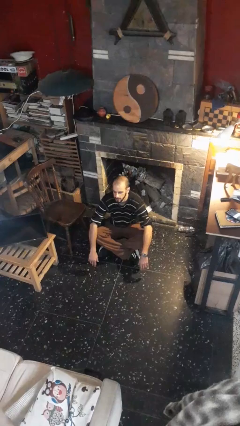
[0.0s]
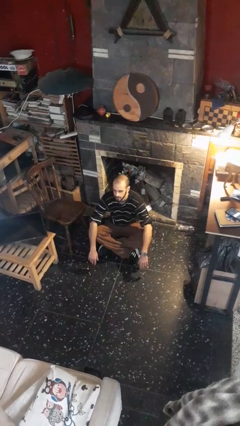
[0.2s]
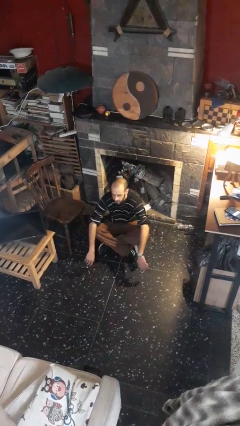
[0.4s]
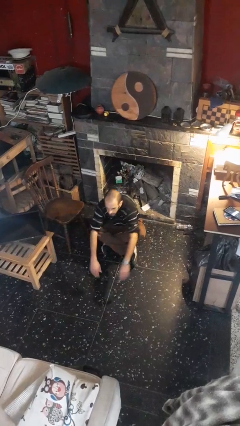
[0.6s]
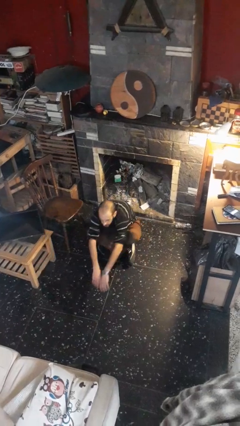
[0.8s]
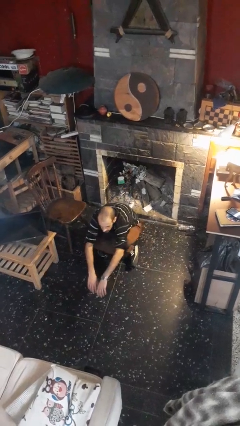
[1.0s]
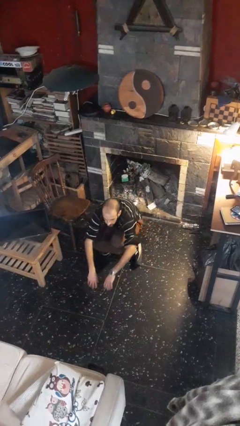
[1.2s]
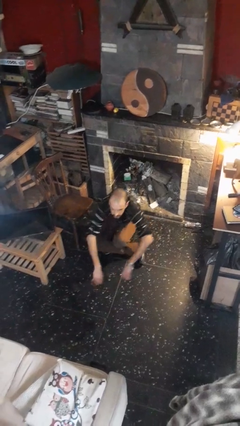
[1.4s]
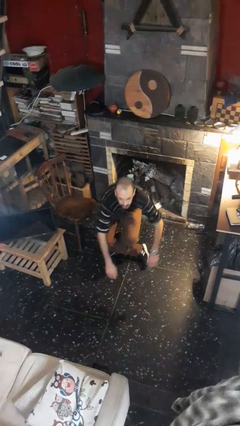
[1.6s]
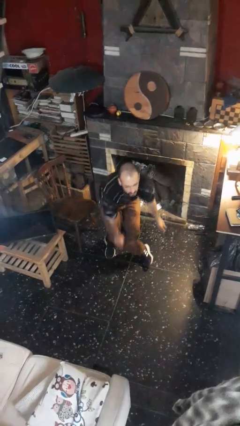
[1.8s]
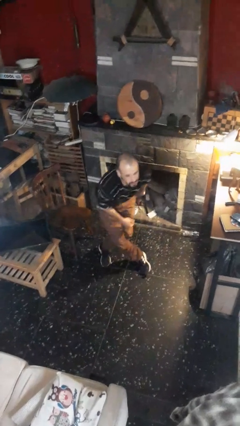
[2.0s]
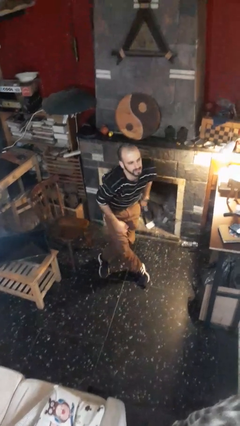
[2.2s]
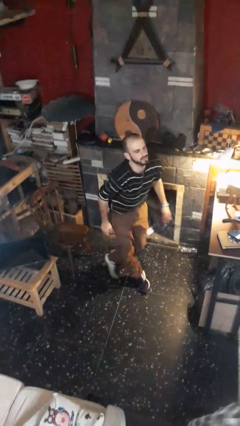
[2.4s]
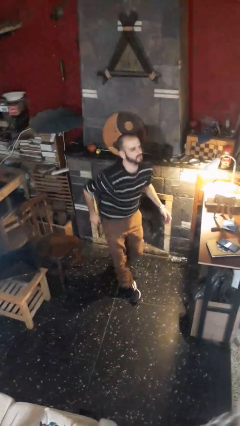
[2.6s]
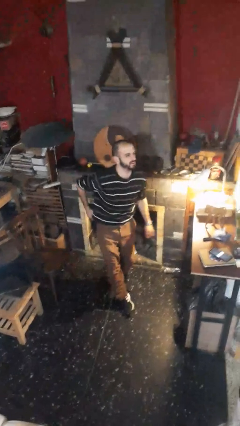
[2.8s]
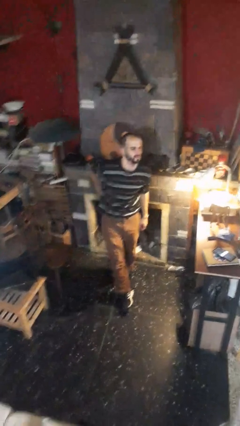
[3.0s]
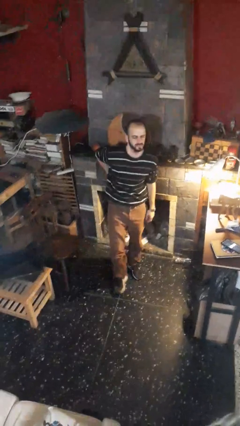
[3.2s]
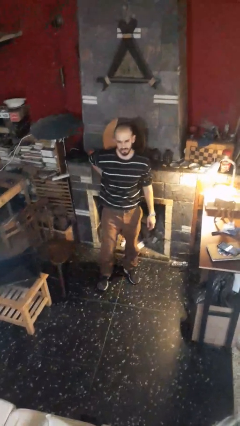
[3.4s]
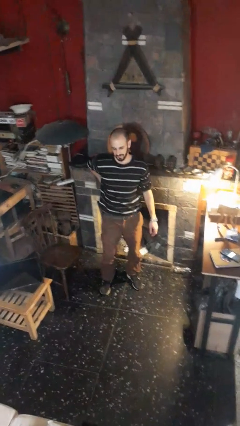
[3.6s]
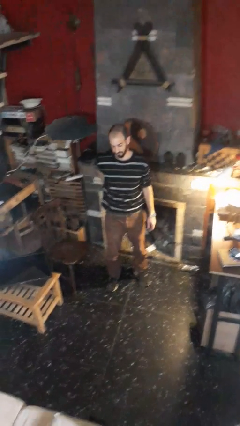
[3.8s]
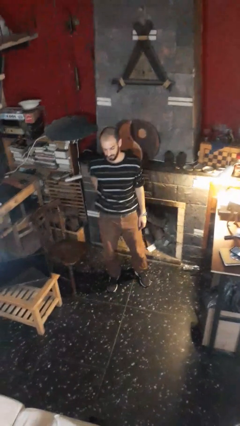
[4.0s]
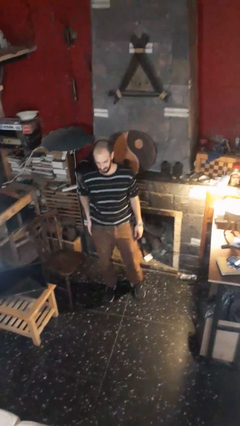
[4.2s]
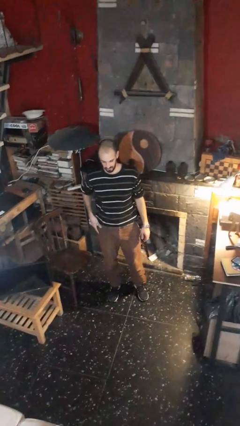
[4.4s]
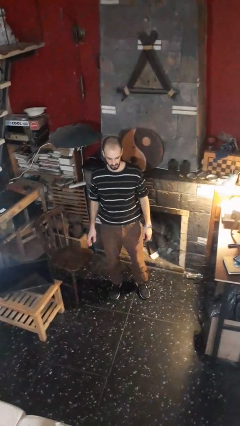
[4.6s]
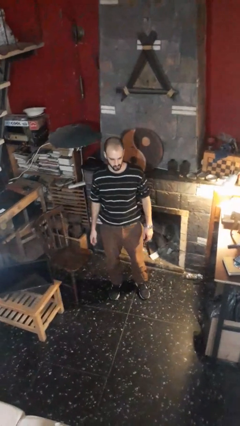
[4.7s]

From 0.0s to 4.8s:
person stands up from floor

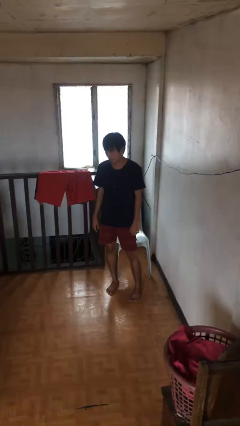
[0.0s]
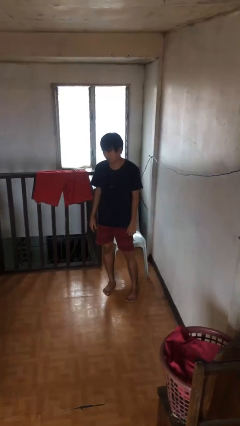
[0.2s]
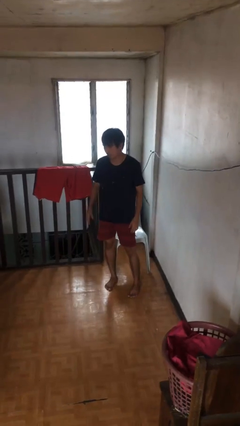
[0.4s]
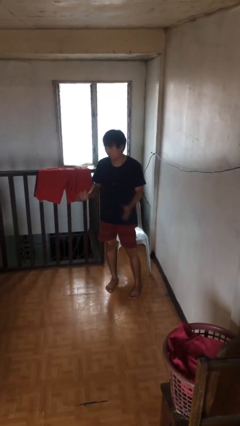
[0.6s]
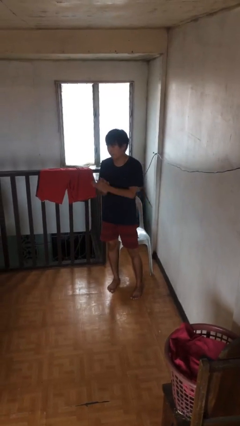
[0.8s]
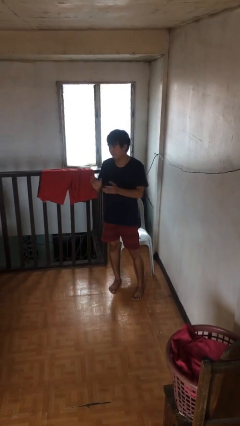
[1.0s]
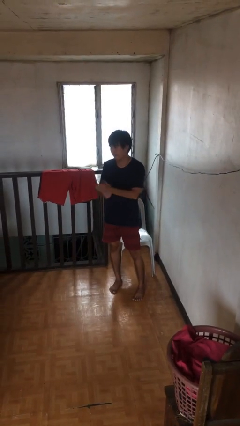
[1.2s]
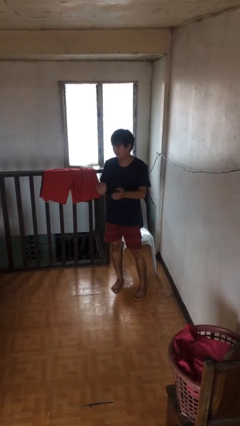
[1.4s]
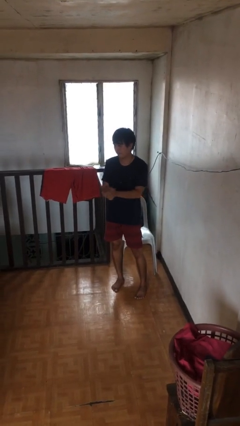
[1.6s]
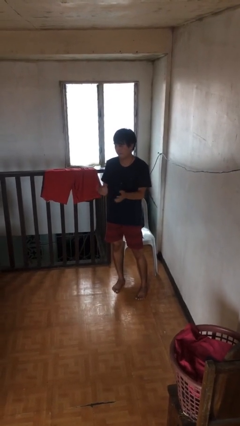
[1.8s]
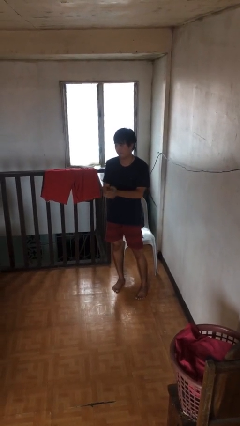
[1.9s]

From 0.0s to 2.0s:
person claps hands

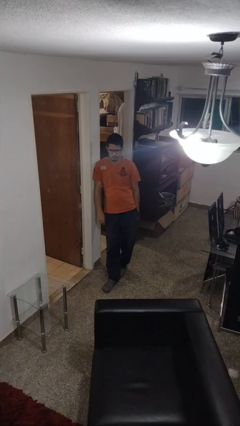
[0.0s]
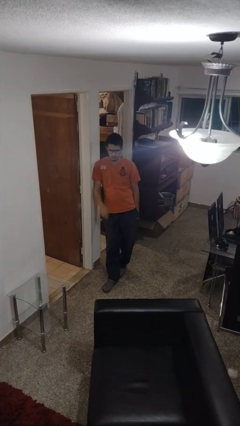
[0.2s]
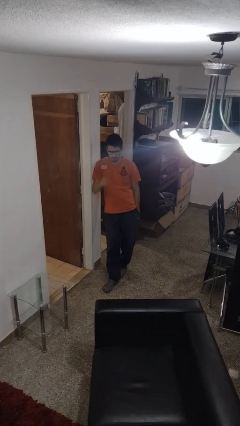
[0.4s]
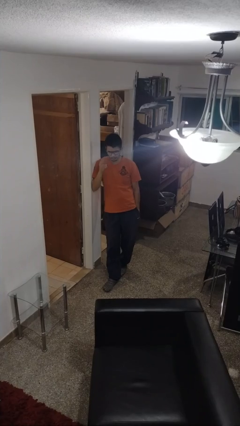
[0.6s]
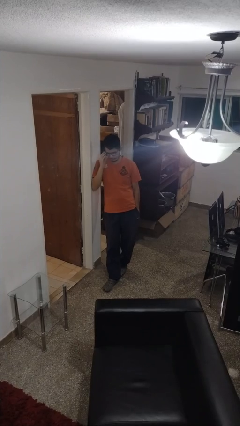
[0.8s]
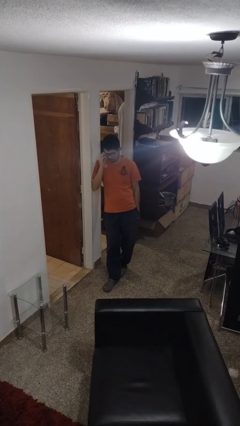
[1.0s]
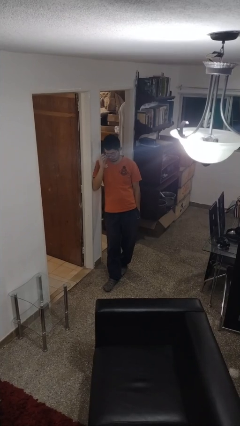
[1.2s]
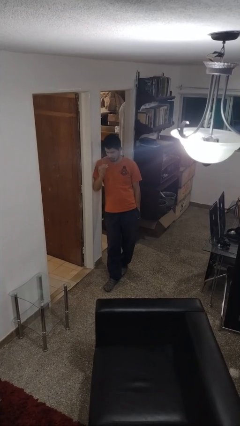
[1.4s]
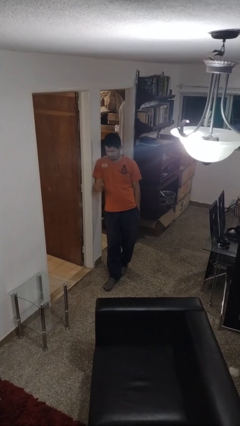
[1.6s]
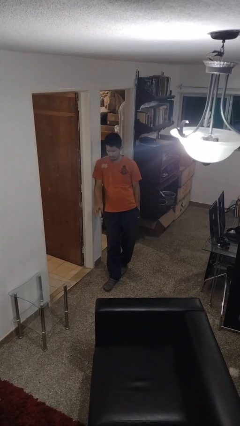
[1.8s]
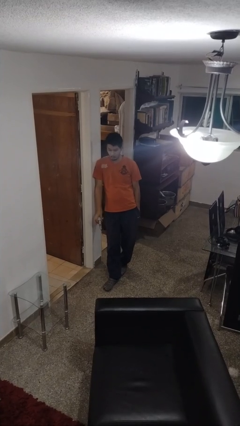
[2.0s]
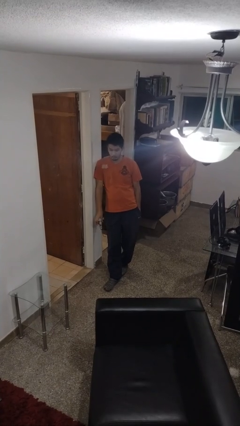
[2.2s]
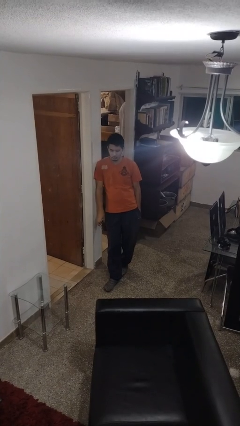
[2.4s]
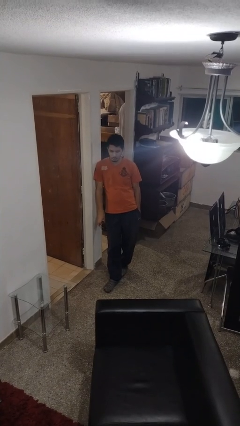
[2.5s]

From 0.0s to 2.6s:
person takes off glasses

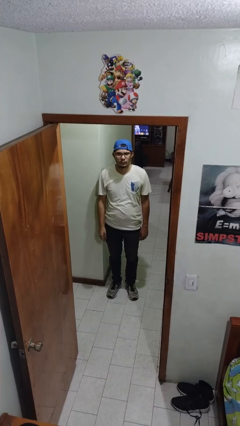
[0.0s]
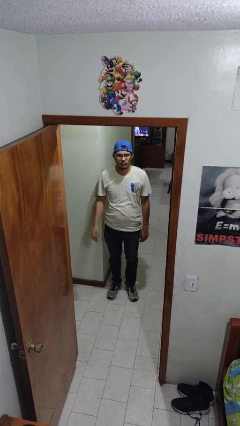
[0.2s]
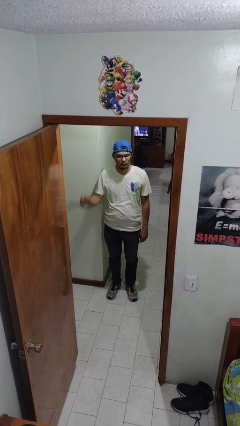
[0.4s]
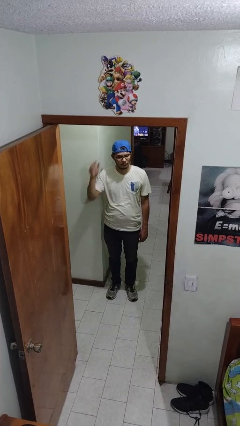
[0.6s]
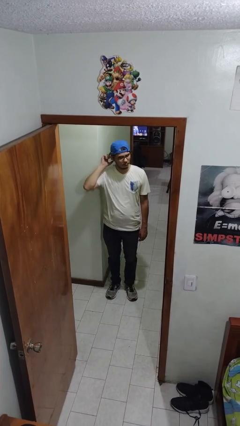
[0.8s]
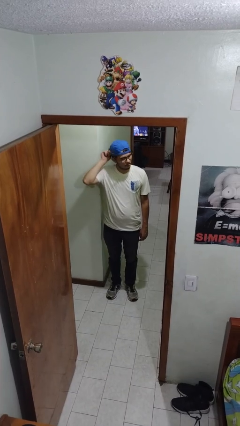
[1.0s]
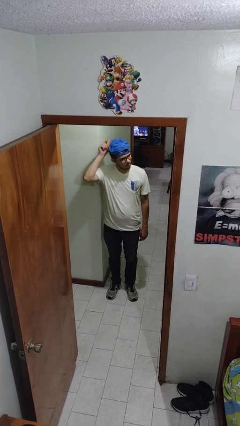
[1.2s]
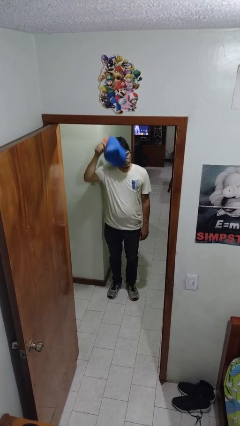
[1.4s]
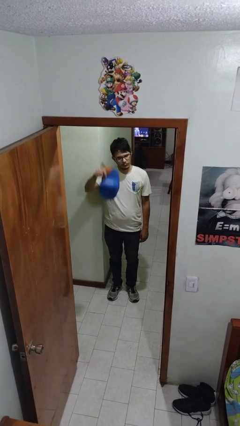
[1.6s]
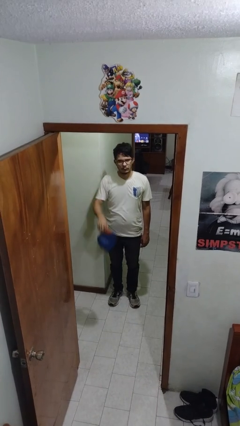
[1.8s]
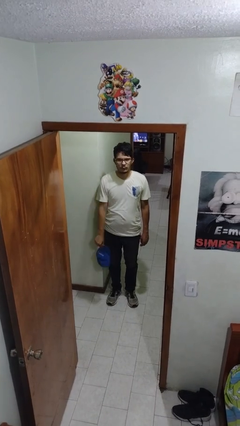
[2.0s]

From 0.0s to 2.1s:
person takes off hat

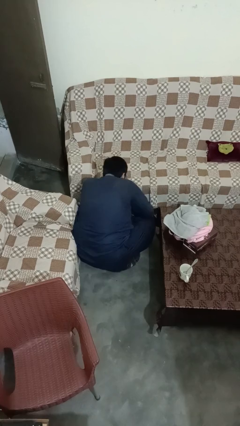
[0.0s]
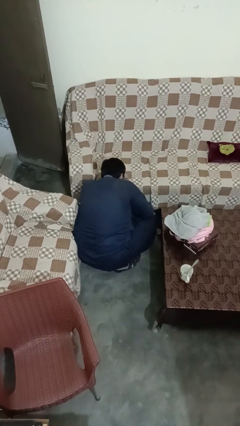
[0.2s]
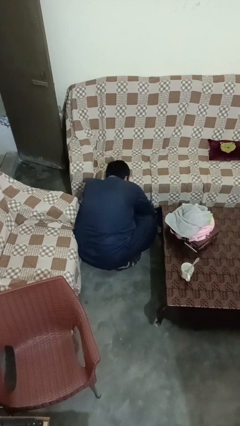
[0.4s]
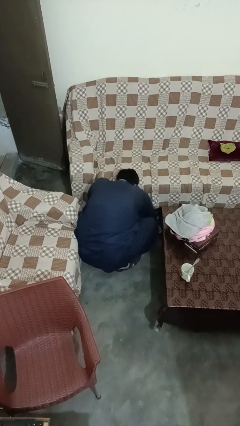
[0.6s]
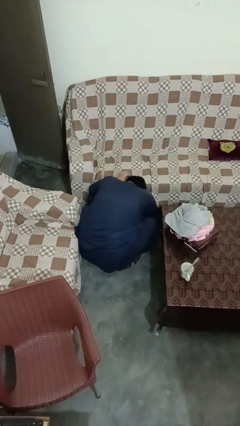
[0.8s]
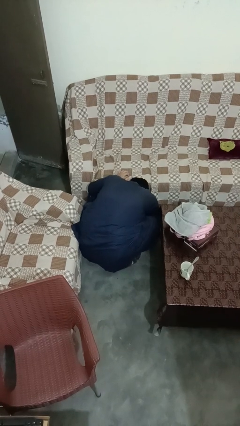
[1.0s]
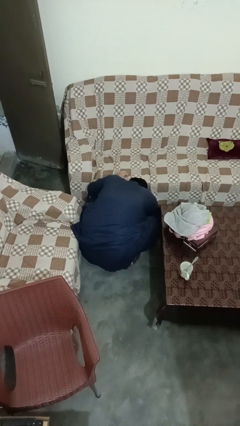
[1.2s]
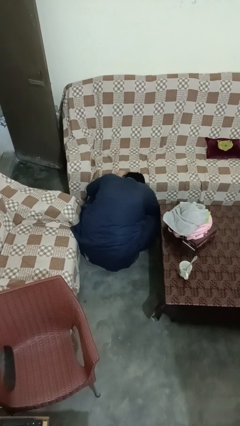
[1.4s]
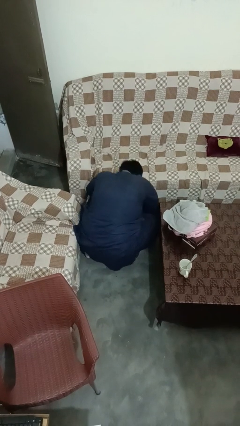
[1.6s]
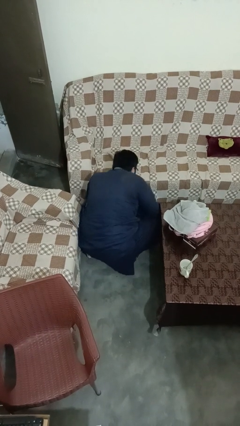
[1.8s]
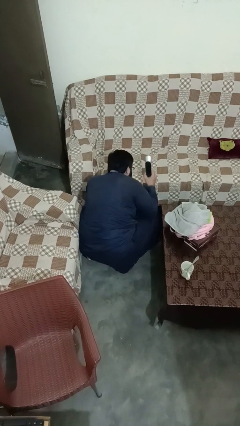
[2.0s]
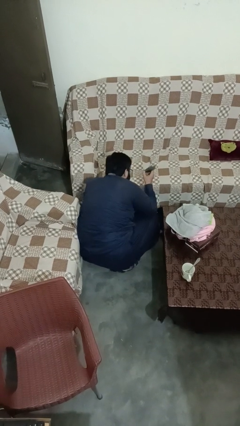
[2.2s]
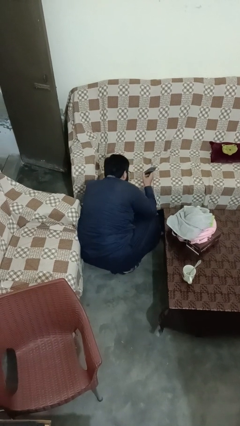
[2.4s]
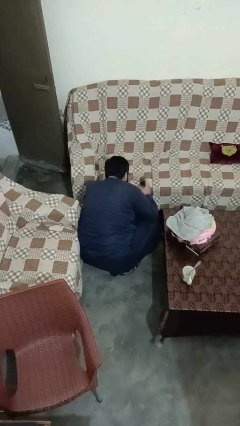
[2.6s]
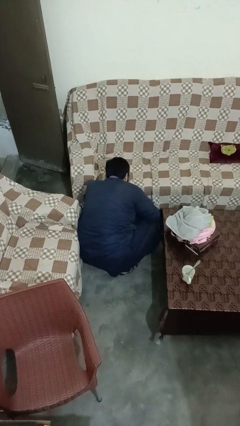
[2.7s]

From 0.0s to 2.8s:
person searches under couch

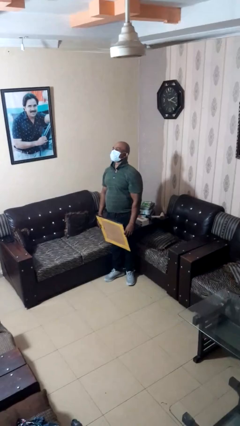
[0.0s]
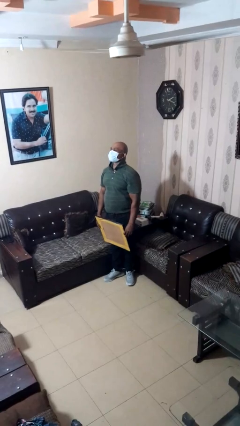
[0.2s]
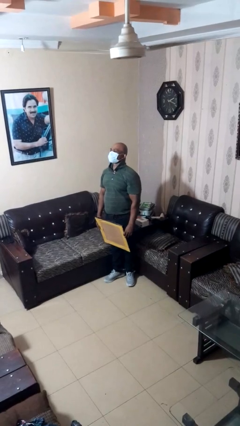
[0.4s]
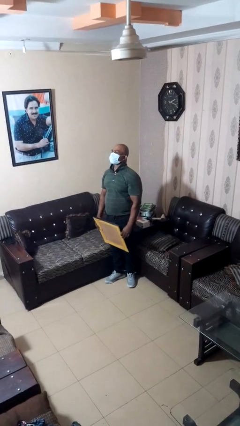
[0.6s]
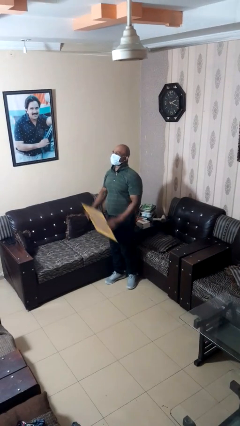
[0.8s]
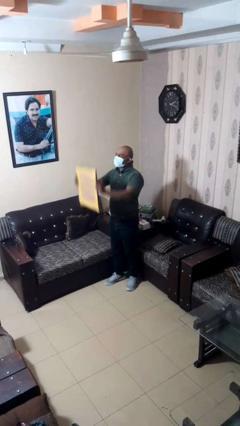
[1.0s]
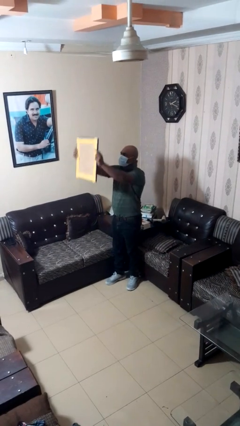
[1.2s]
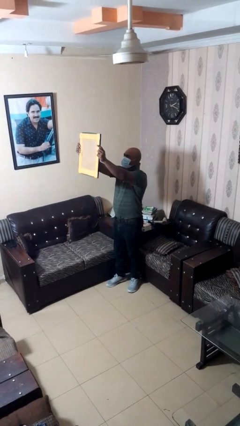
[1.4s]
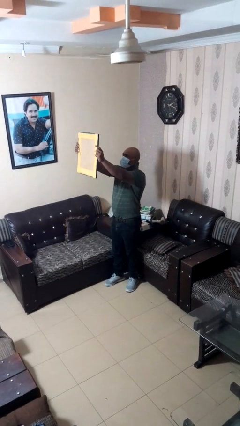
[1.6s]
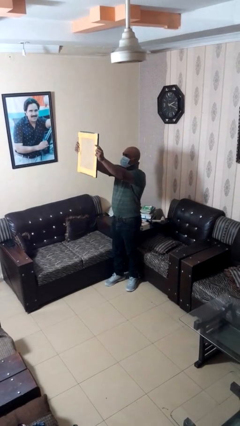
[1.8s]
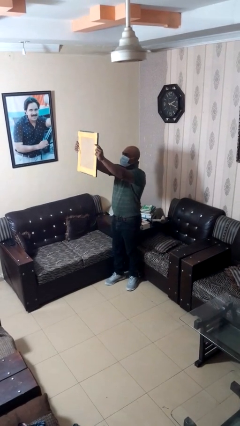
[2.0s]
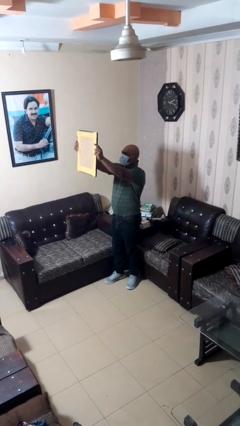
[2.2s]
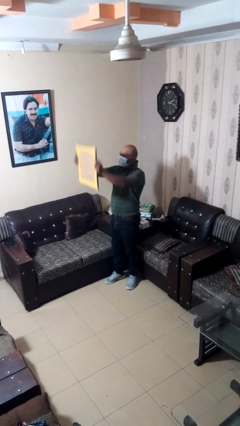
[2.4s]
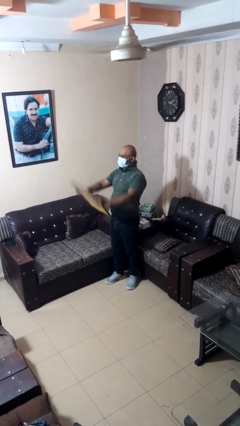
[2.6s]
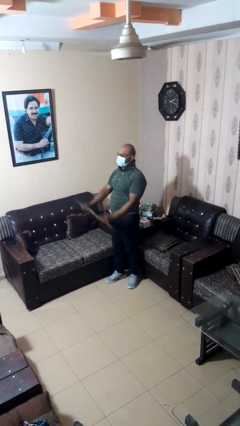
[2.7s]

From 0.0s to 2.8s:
person holds object above head

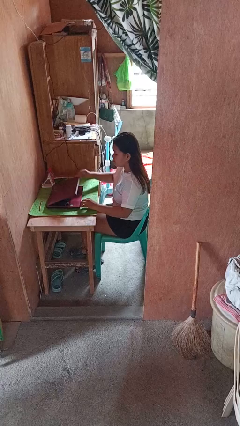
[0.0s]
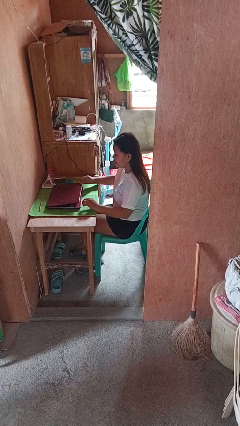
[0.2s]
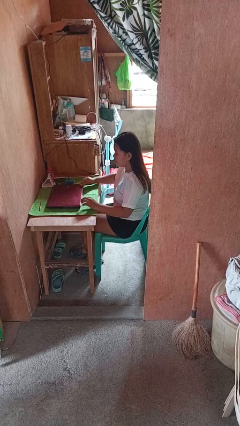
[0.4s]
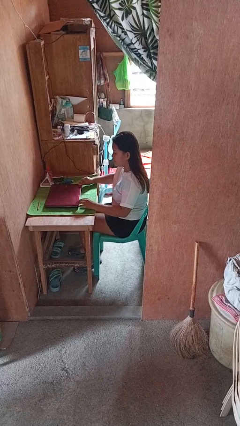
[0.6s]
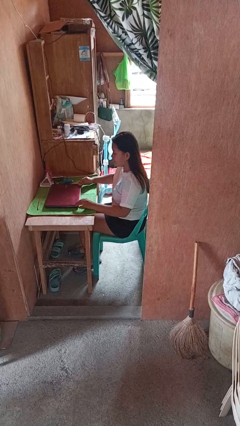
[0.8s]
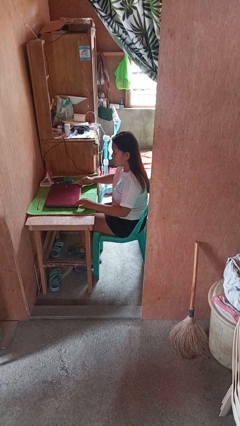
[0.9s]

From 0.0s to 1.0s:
person closes laptop
